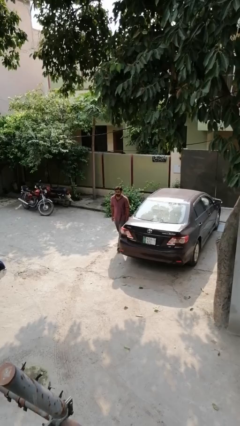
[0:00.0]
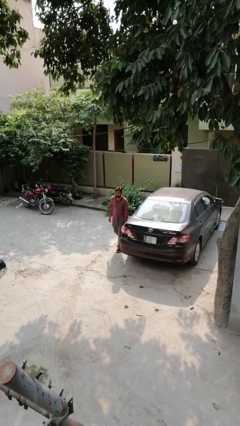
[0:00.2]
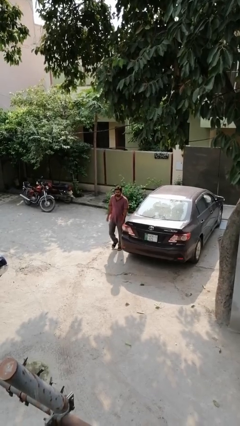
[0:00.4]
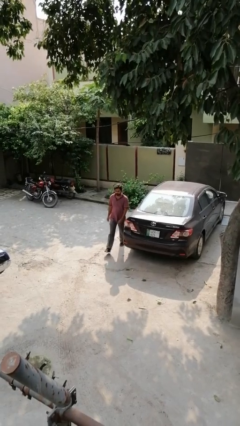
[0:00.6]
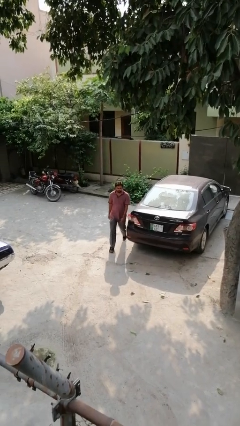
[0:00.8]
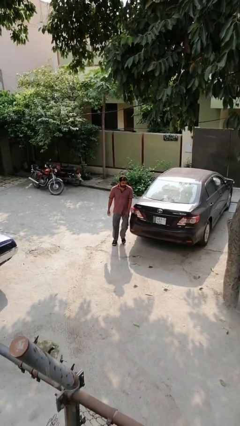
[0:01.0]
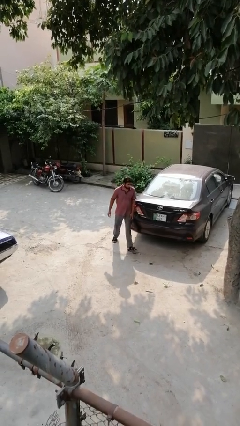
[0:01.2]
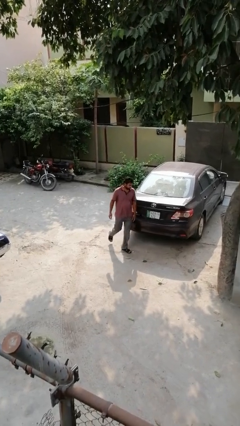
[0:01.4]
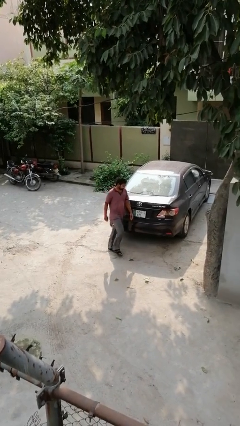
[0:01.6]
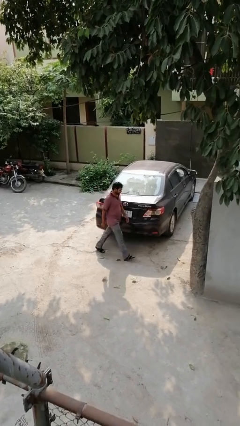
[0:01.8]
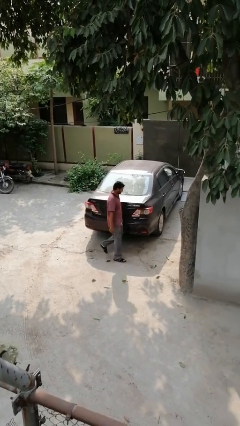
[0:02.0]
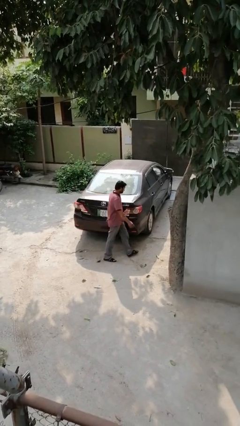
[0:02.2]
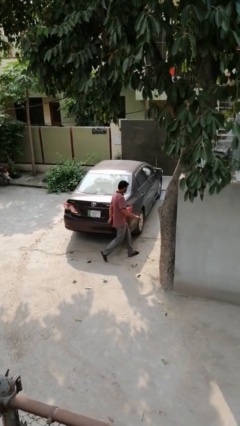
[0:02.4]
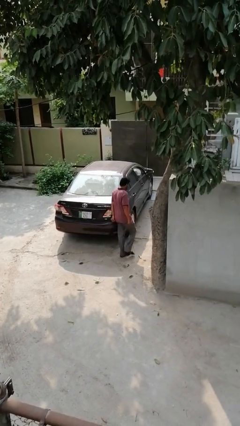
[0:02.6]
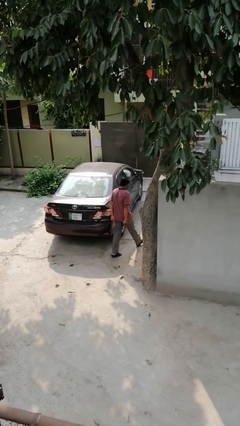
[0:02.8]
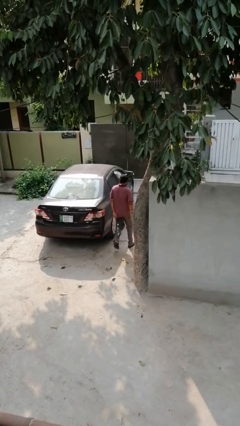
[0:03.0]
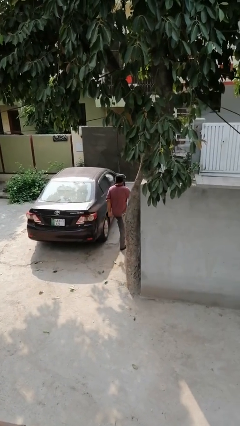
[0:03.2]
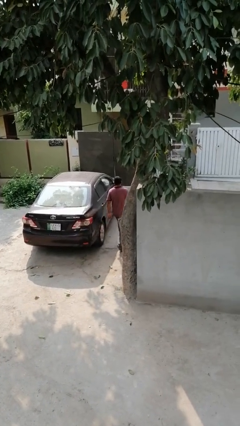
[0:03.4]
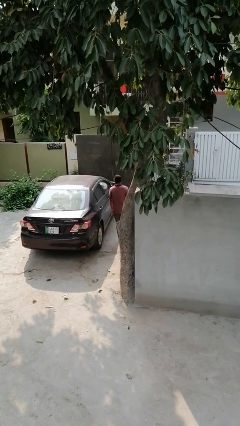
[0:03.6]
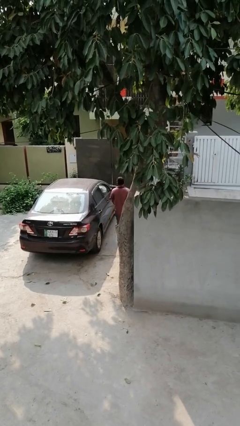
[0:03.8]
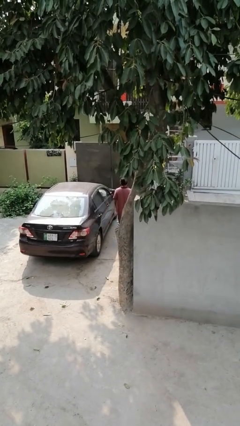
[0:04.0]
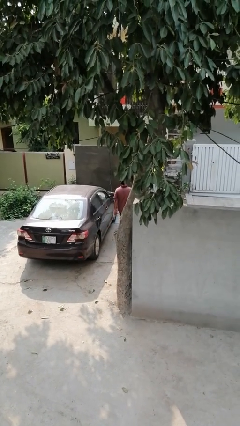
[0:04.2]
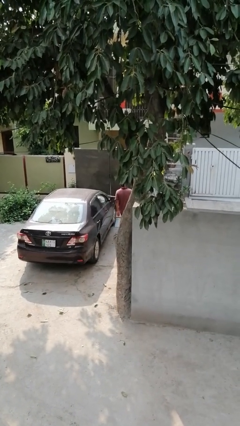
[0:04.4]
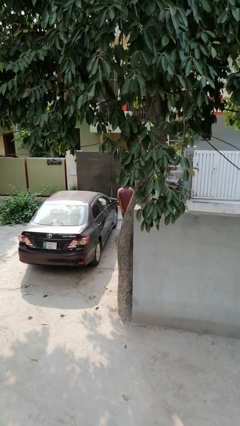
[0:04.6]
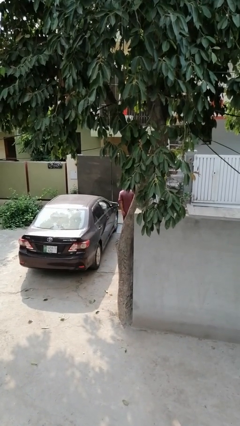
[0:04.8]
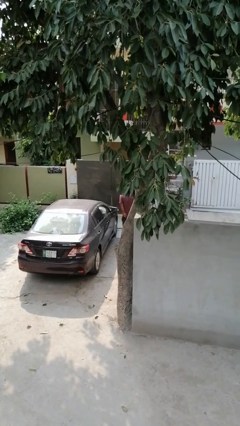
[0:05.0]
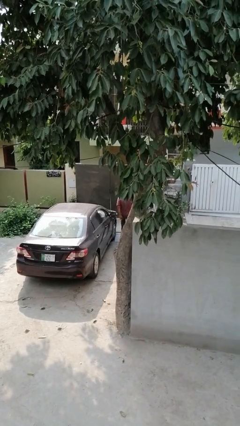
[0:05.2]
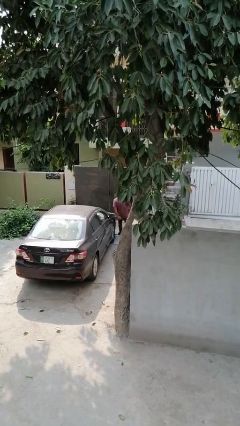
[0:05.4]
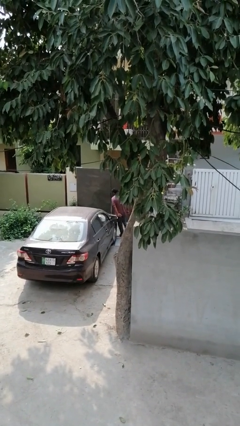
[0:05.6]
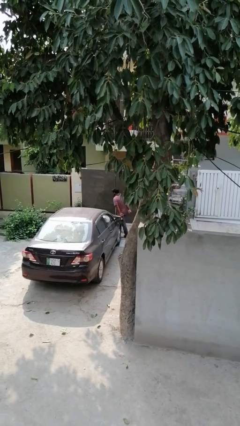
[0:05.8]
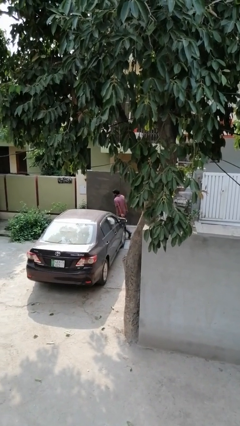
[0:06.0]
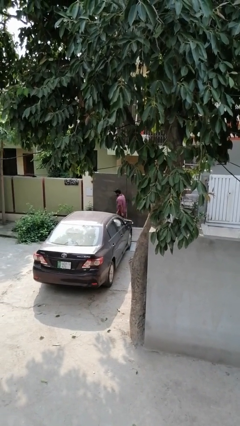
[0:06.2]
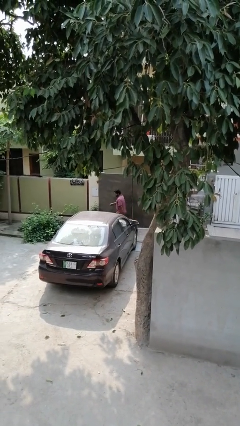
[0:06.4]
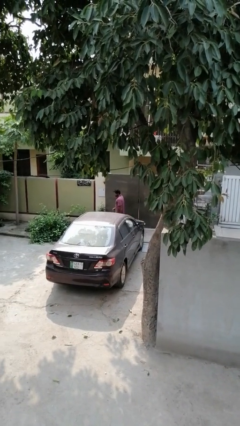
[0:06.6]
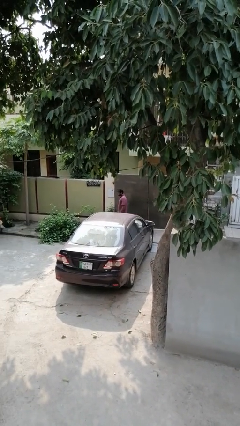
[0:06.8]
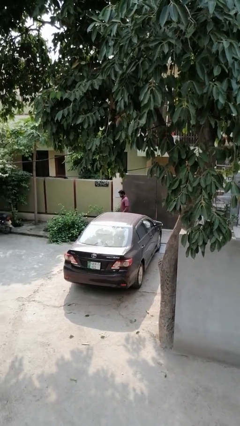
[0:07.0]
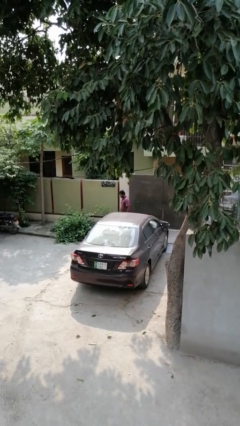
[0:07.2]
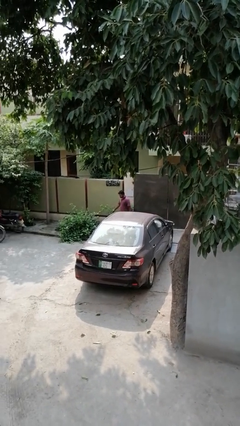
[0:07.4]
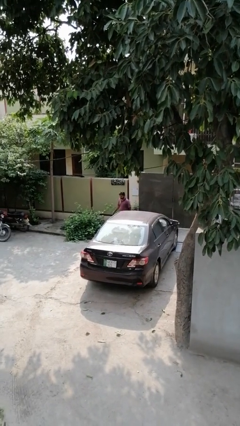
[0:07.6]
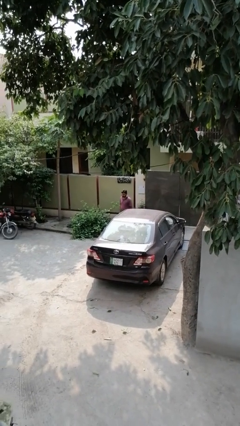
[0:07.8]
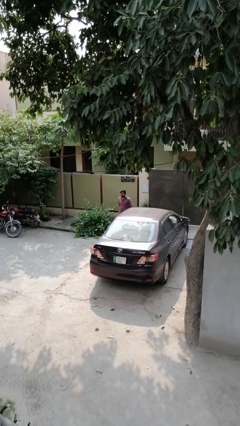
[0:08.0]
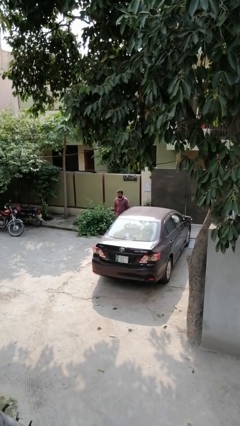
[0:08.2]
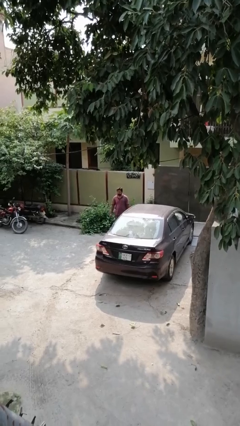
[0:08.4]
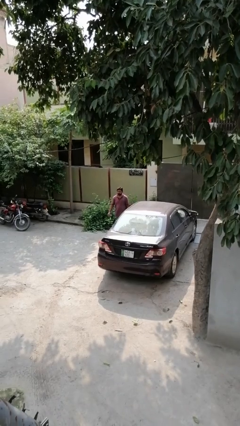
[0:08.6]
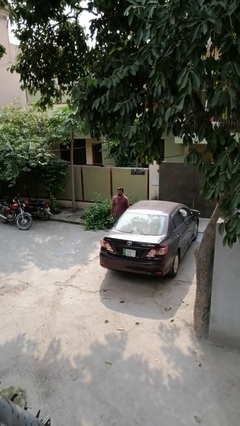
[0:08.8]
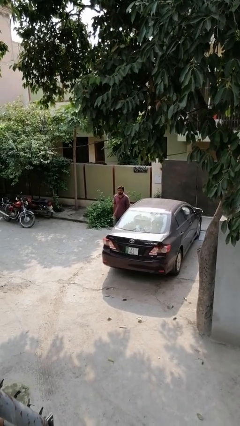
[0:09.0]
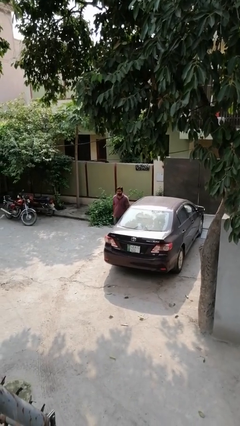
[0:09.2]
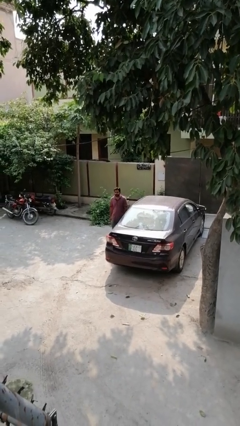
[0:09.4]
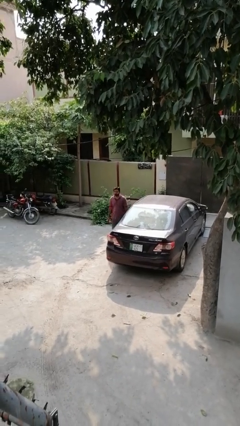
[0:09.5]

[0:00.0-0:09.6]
person walks around car

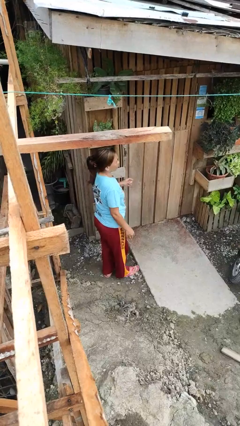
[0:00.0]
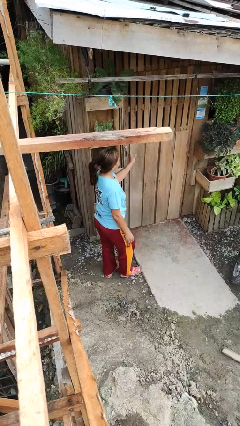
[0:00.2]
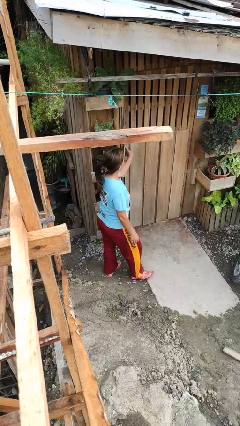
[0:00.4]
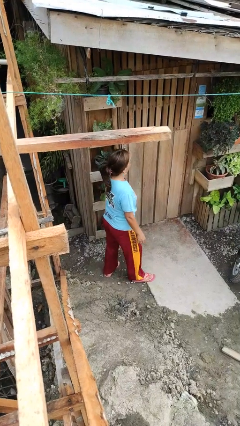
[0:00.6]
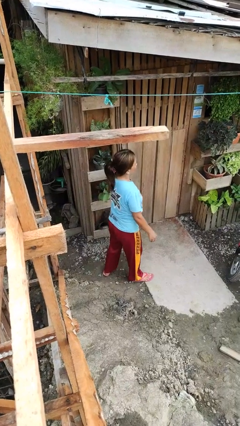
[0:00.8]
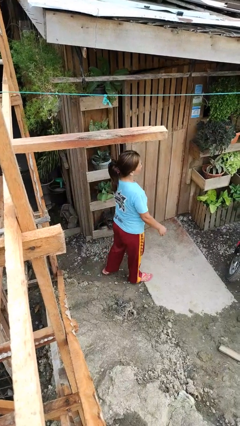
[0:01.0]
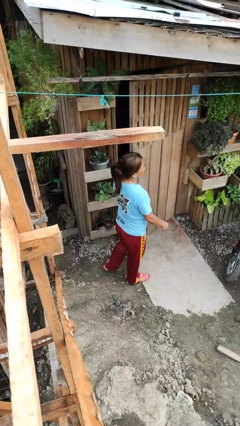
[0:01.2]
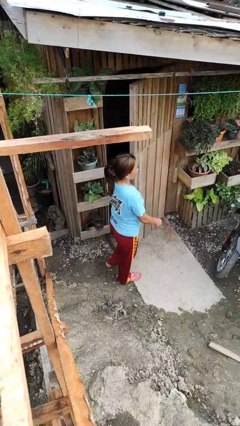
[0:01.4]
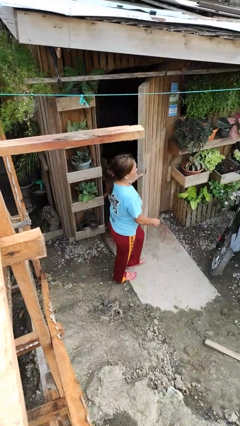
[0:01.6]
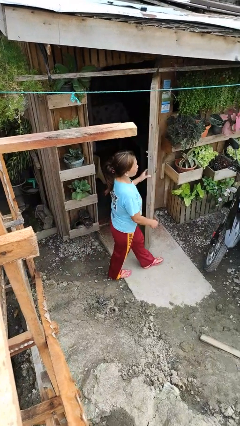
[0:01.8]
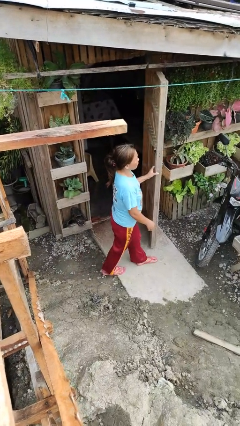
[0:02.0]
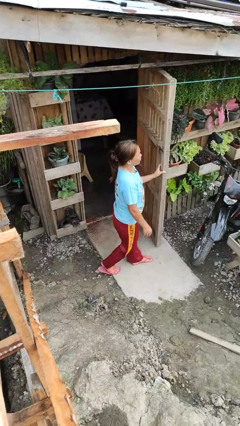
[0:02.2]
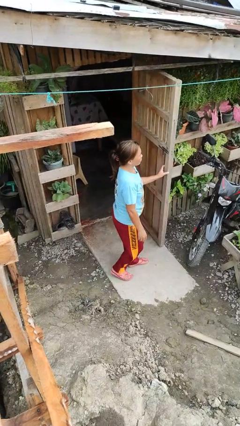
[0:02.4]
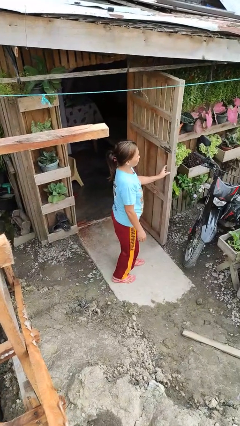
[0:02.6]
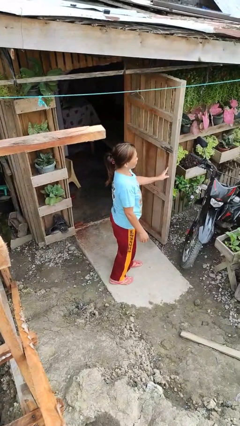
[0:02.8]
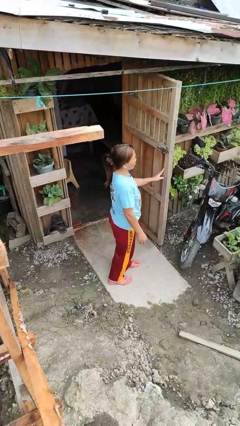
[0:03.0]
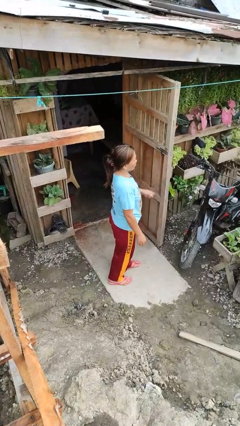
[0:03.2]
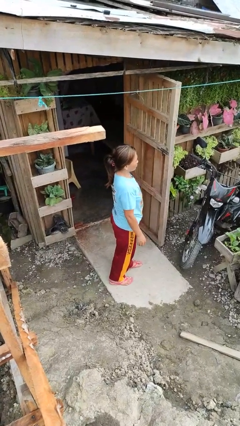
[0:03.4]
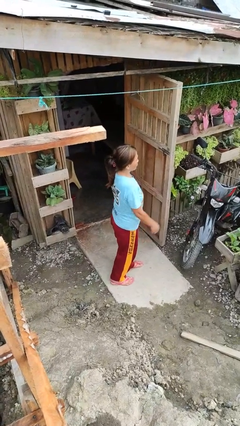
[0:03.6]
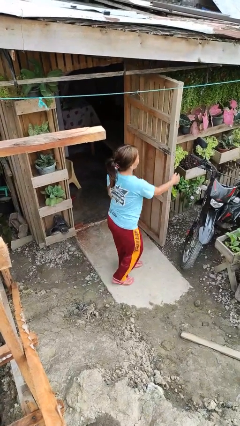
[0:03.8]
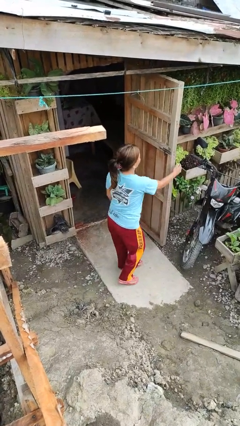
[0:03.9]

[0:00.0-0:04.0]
person opens facility door

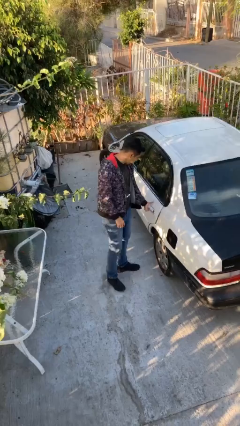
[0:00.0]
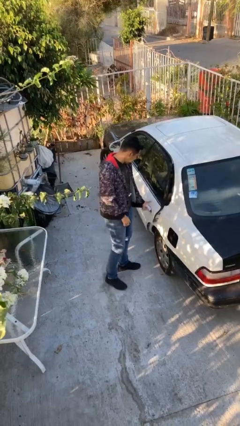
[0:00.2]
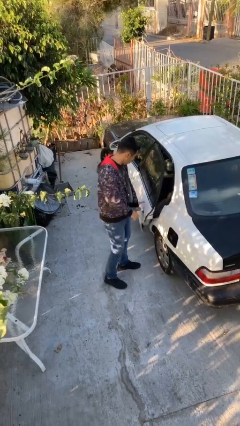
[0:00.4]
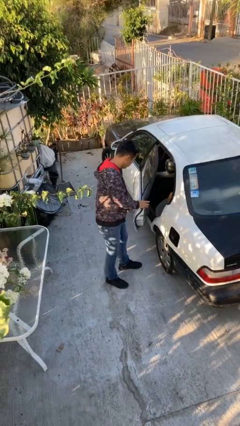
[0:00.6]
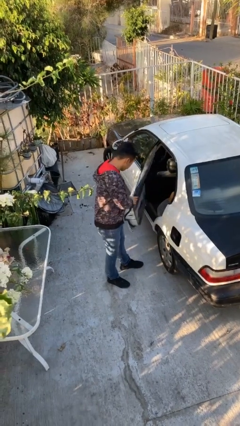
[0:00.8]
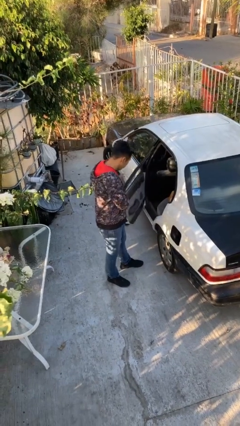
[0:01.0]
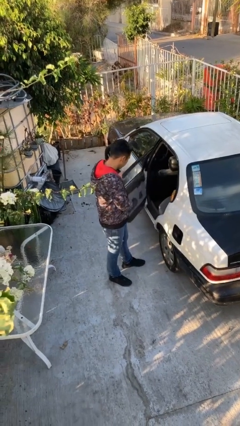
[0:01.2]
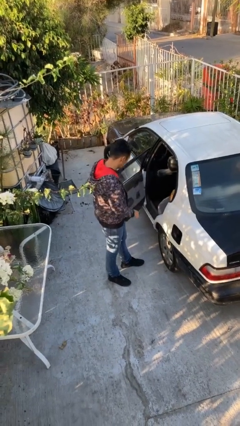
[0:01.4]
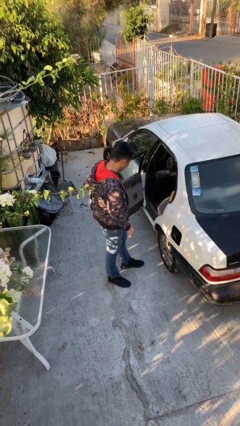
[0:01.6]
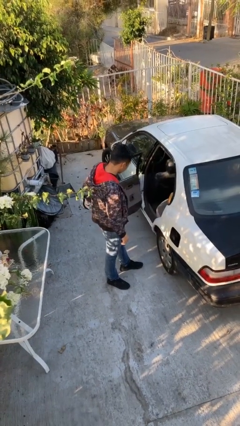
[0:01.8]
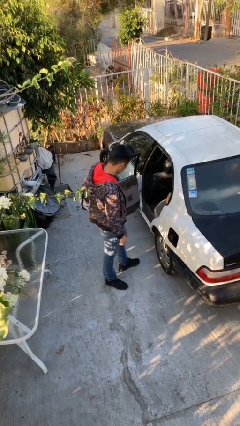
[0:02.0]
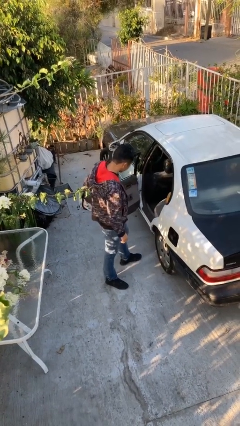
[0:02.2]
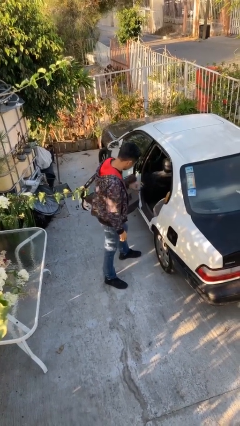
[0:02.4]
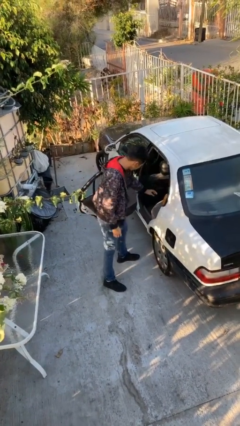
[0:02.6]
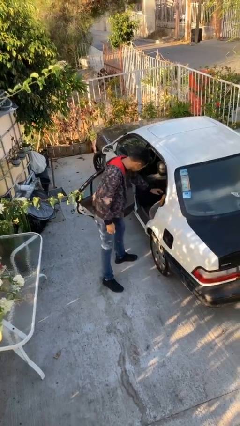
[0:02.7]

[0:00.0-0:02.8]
person opens car door

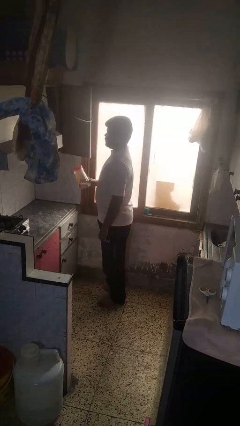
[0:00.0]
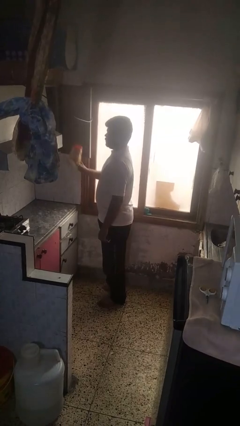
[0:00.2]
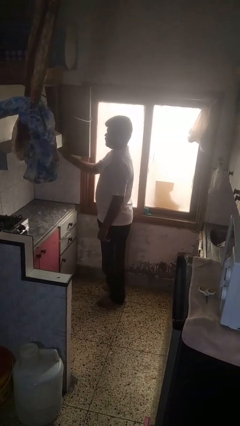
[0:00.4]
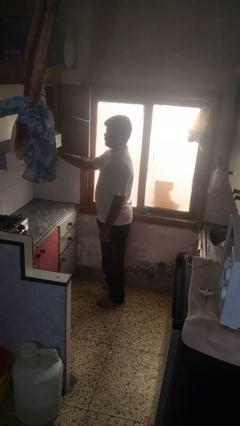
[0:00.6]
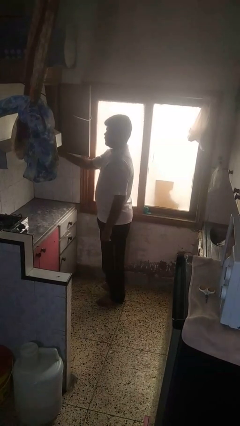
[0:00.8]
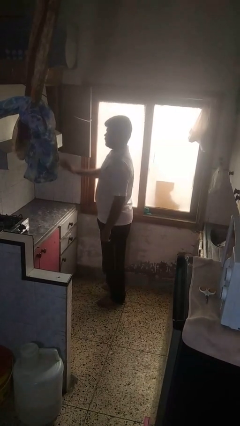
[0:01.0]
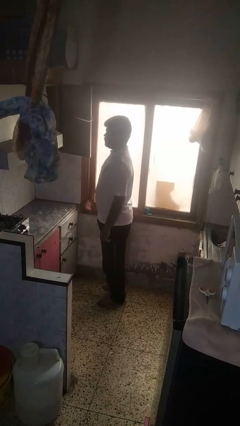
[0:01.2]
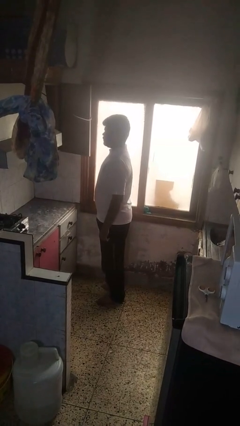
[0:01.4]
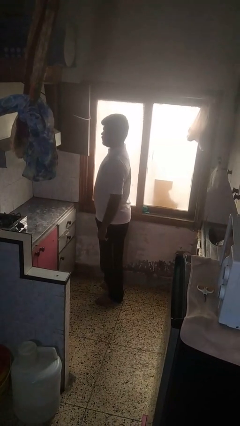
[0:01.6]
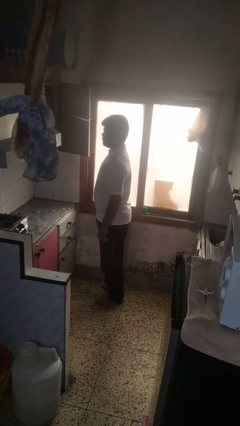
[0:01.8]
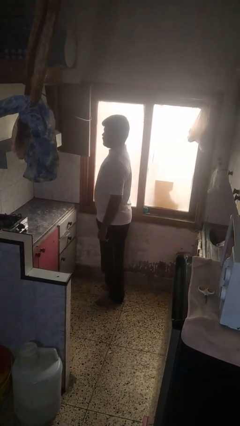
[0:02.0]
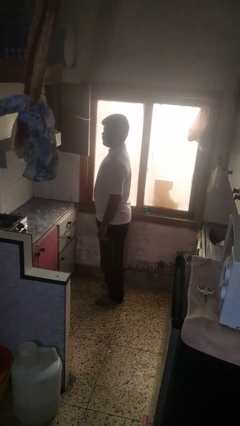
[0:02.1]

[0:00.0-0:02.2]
person puts down object into cabinet
